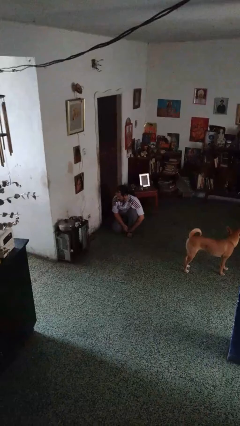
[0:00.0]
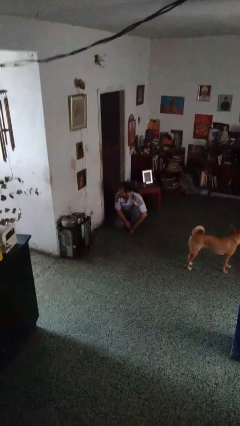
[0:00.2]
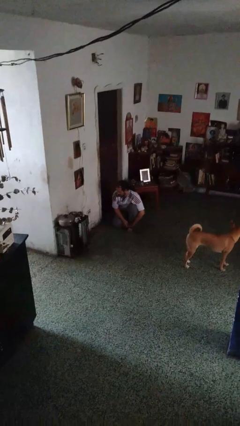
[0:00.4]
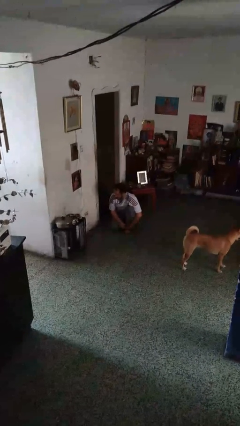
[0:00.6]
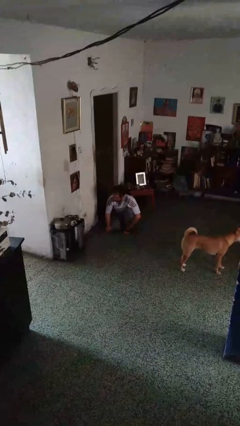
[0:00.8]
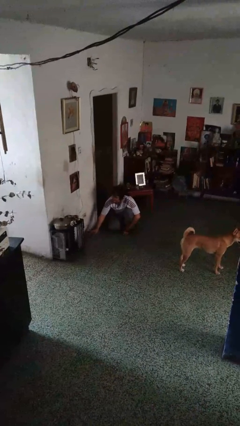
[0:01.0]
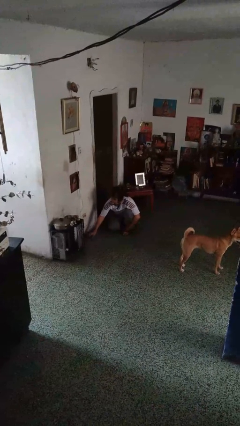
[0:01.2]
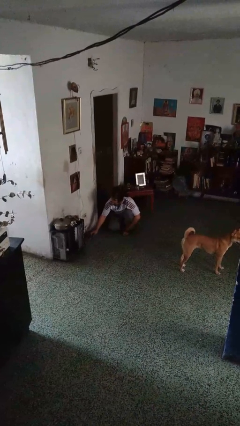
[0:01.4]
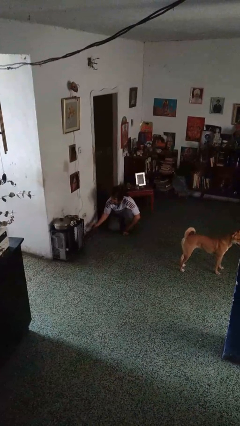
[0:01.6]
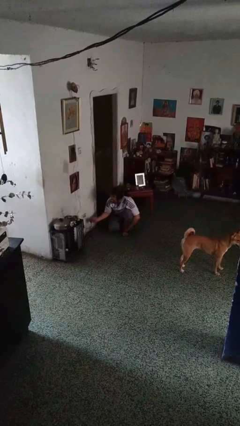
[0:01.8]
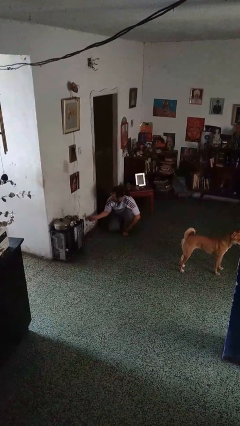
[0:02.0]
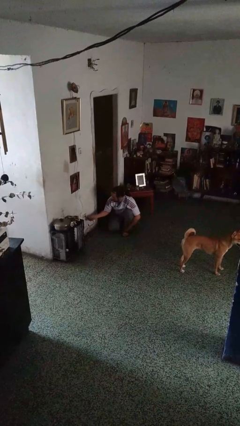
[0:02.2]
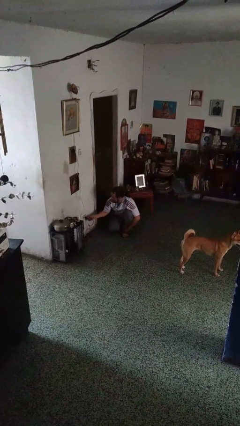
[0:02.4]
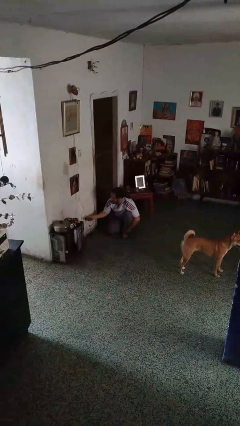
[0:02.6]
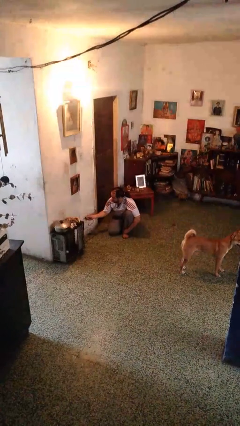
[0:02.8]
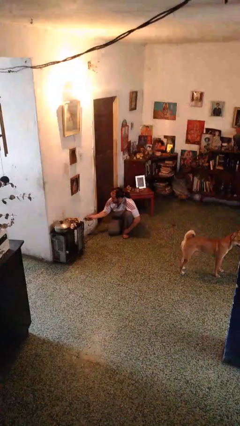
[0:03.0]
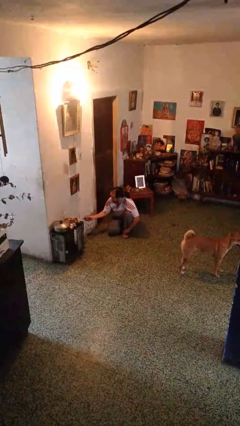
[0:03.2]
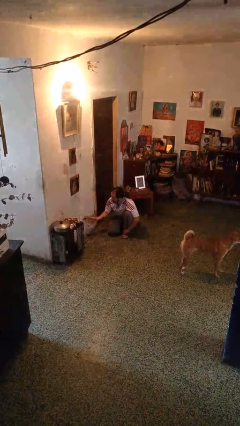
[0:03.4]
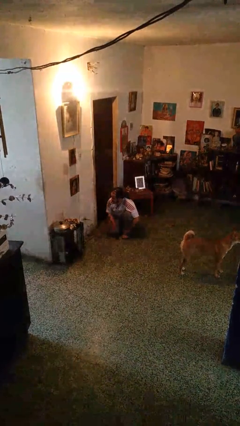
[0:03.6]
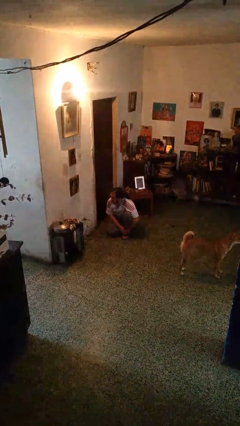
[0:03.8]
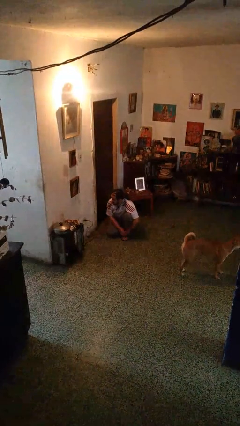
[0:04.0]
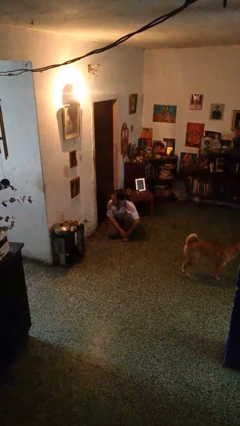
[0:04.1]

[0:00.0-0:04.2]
person plugs into electrical socket

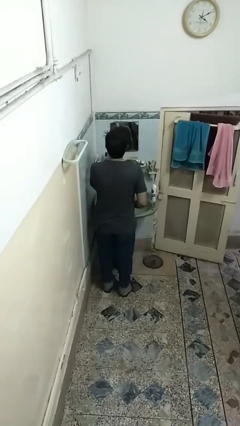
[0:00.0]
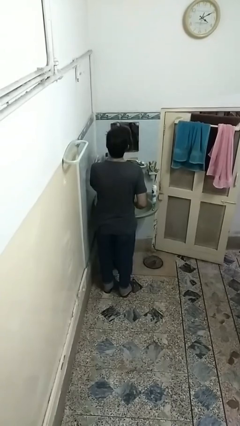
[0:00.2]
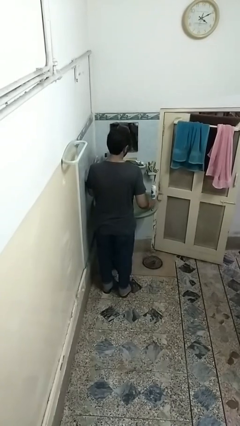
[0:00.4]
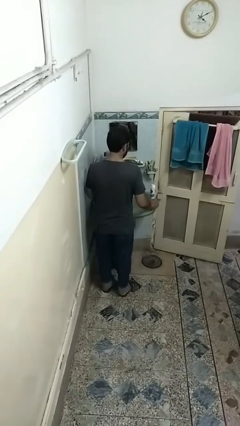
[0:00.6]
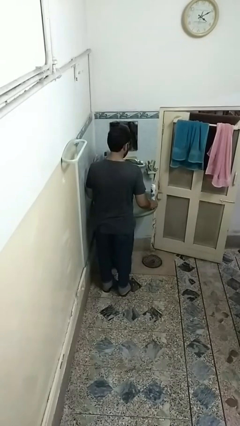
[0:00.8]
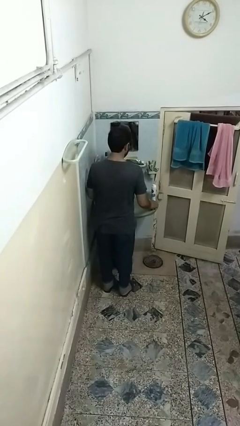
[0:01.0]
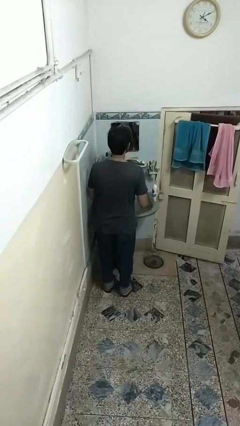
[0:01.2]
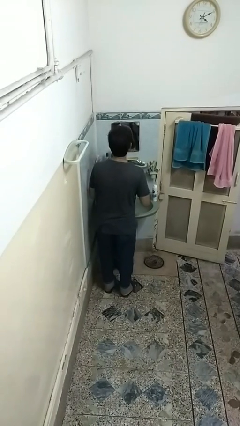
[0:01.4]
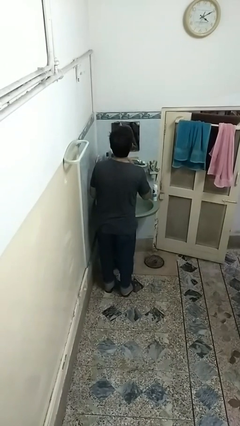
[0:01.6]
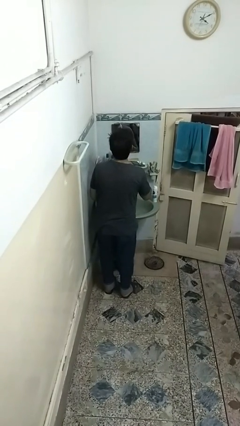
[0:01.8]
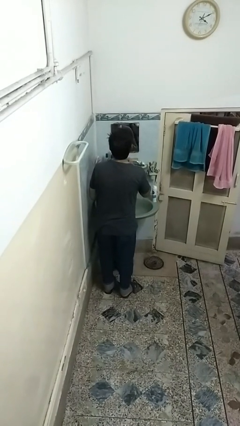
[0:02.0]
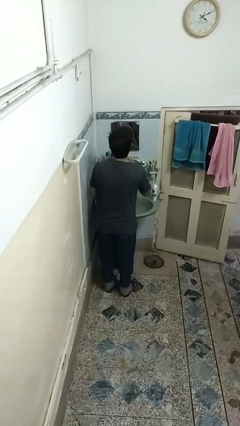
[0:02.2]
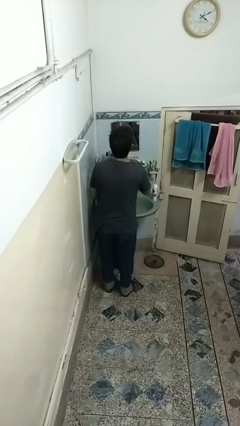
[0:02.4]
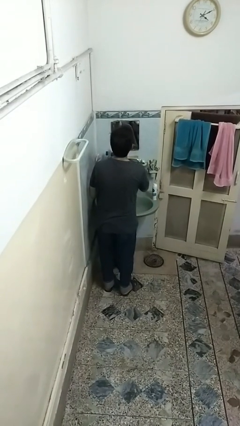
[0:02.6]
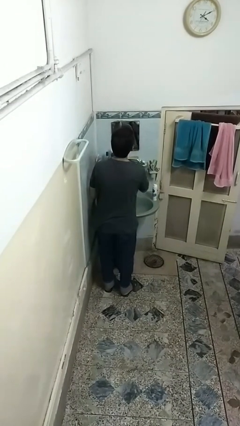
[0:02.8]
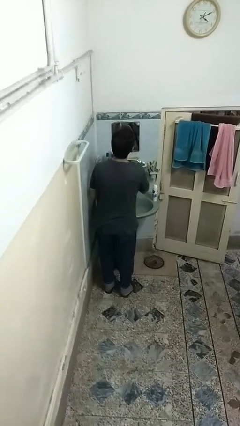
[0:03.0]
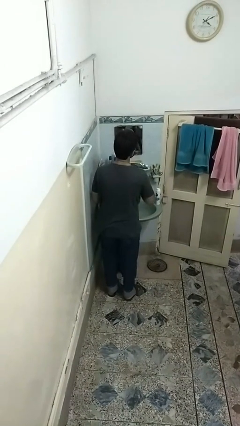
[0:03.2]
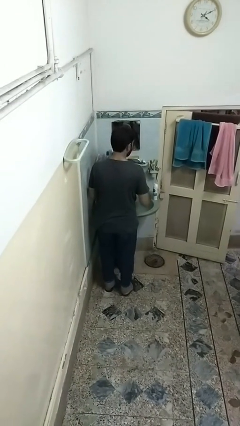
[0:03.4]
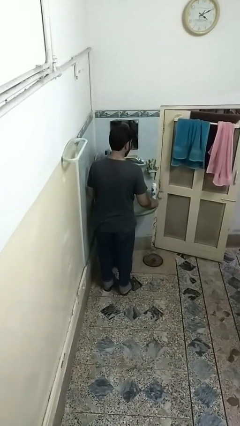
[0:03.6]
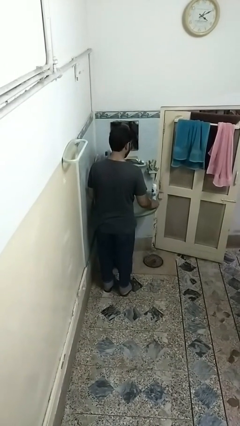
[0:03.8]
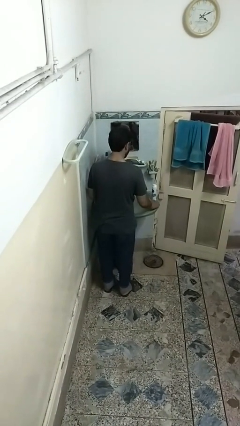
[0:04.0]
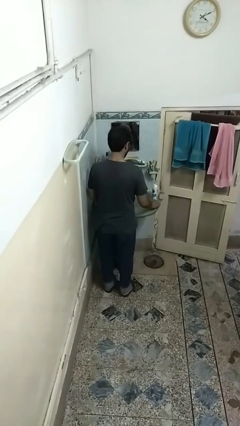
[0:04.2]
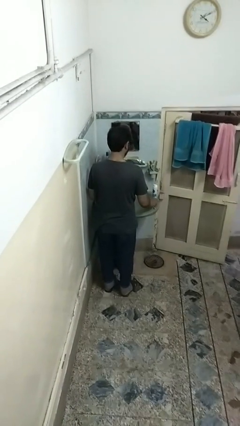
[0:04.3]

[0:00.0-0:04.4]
person shaves face

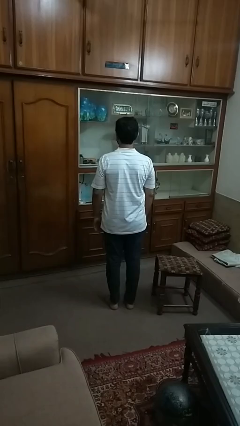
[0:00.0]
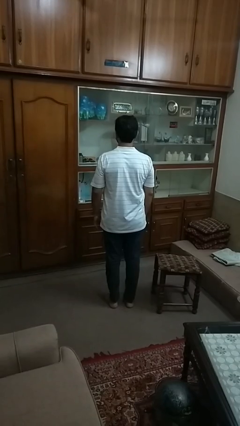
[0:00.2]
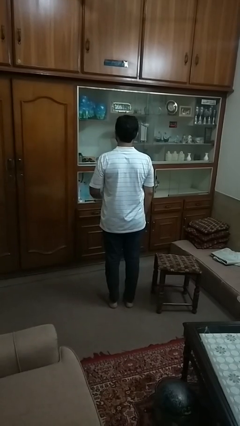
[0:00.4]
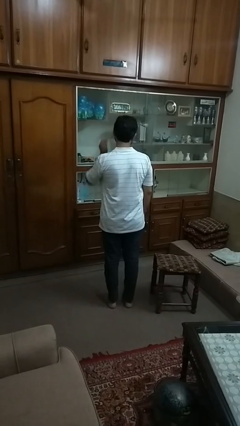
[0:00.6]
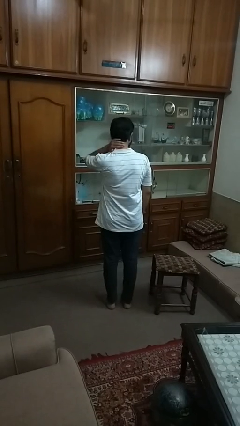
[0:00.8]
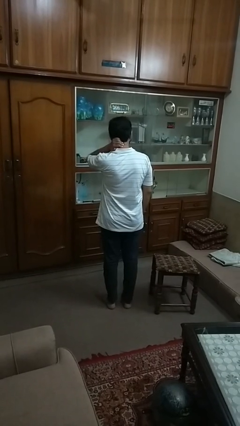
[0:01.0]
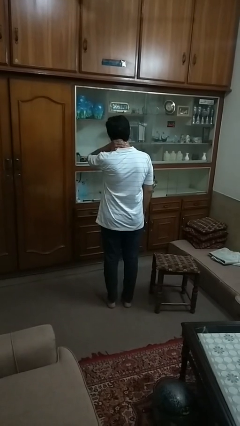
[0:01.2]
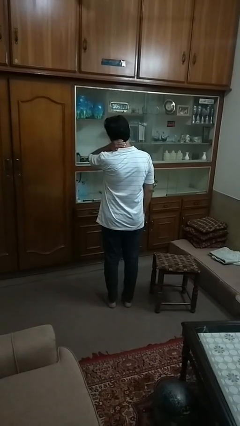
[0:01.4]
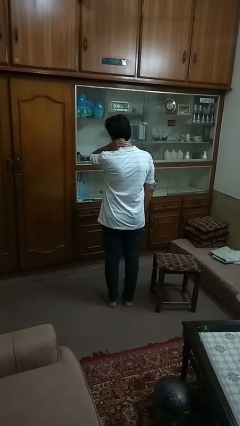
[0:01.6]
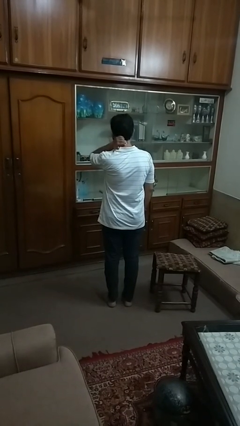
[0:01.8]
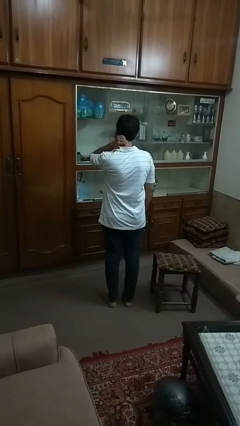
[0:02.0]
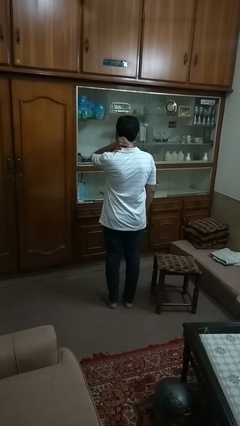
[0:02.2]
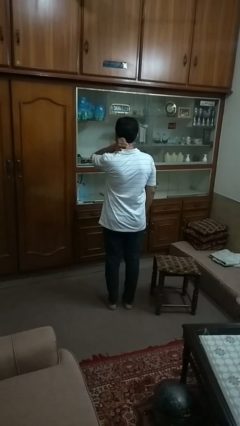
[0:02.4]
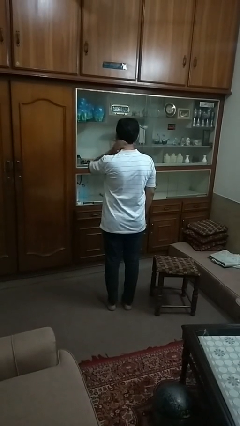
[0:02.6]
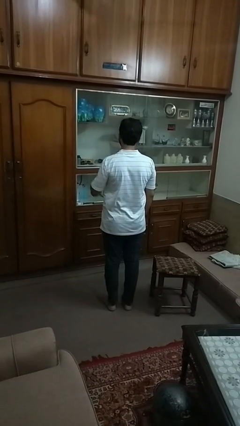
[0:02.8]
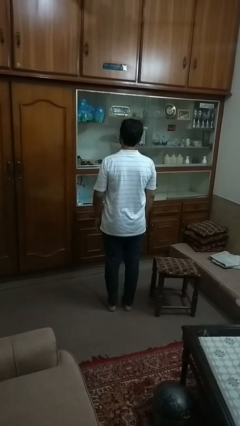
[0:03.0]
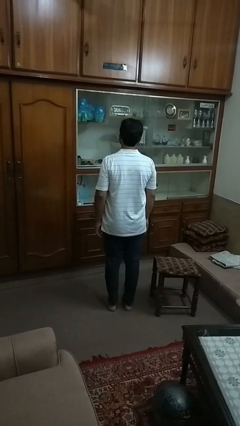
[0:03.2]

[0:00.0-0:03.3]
person rubs neck

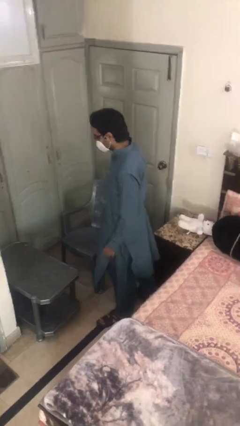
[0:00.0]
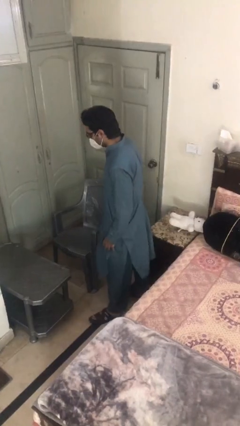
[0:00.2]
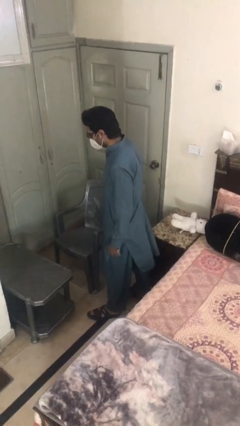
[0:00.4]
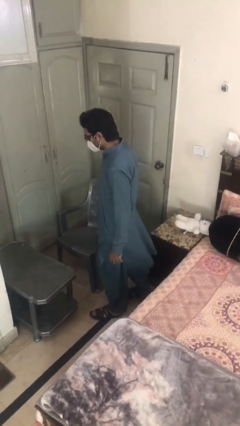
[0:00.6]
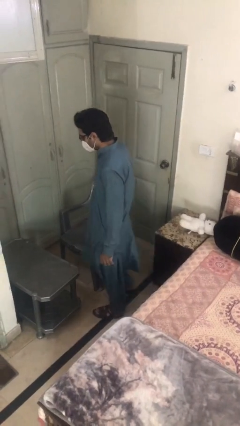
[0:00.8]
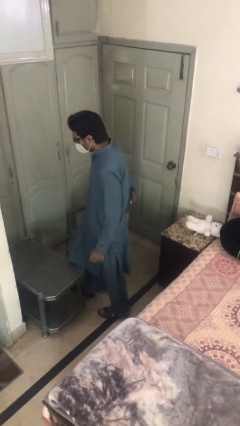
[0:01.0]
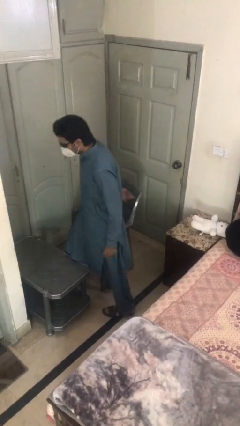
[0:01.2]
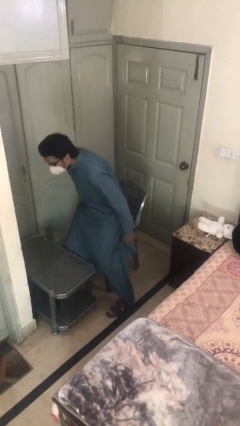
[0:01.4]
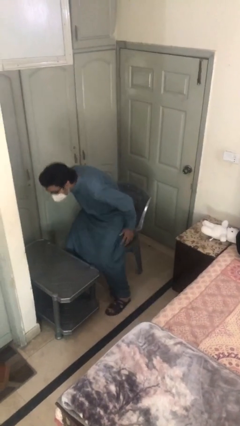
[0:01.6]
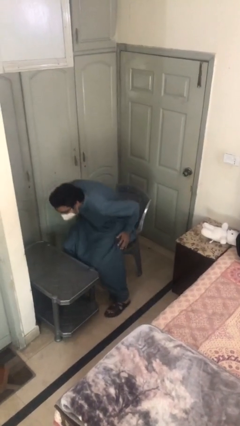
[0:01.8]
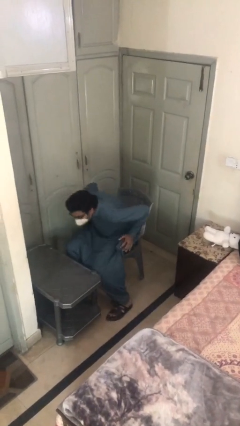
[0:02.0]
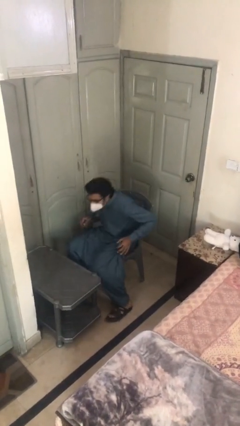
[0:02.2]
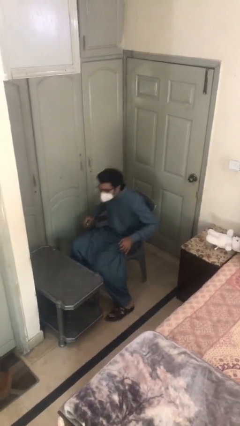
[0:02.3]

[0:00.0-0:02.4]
person sits down

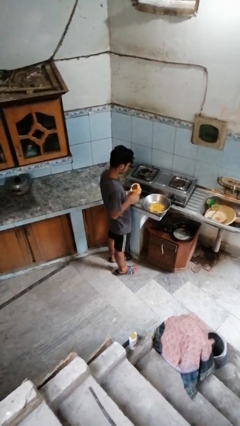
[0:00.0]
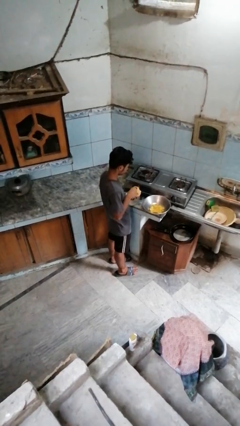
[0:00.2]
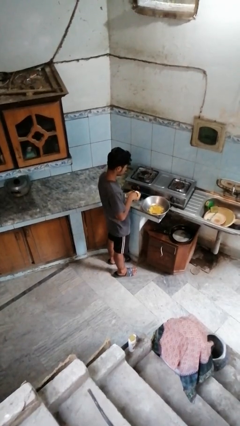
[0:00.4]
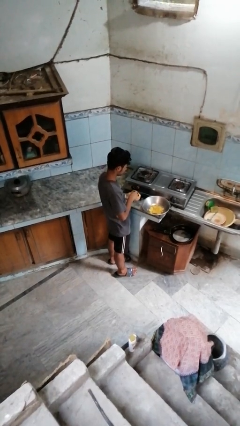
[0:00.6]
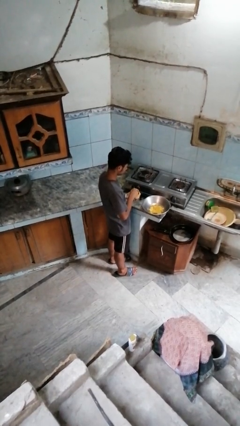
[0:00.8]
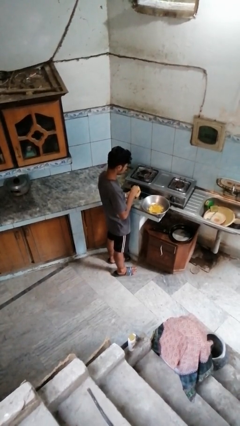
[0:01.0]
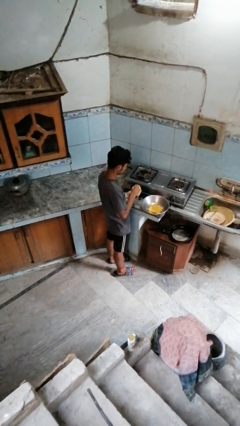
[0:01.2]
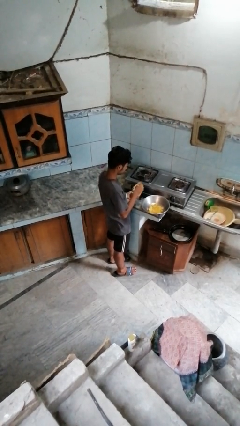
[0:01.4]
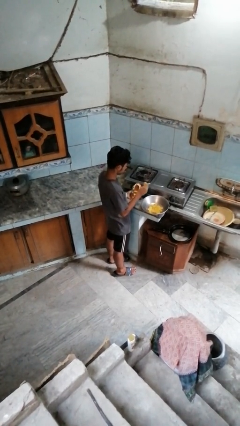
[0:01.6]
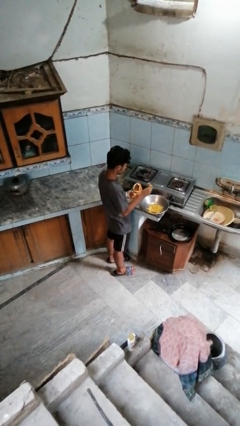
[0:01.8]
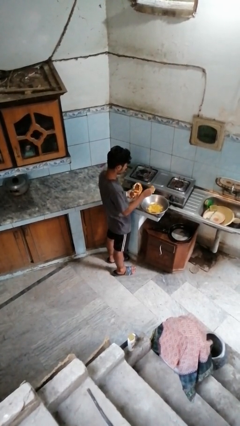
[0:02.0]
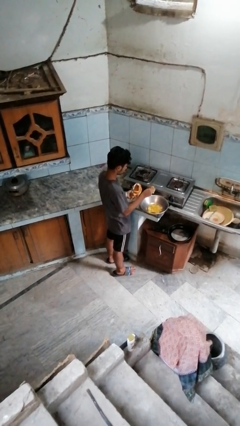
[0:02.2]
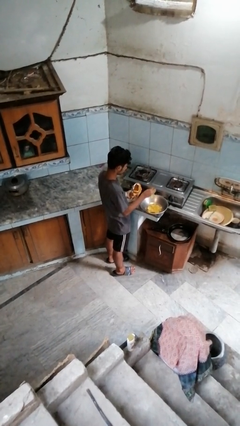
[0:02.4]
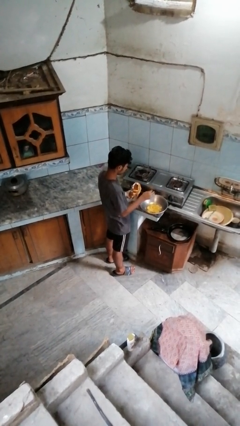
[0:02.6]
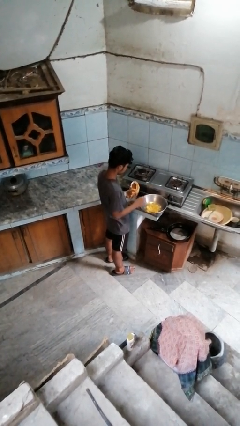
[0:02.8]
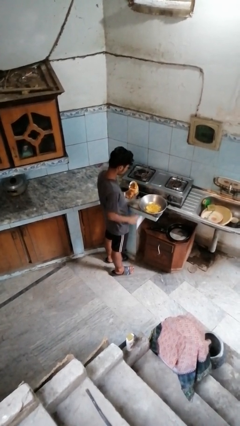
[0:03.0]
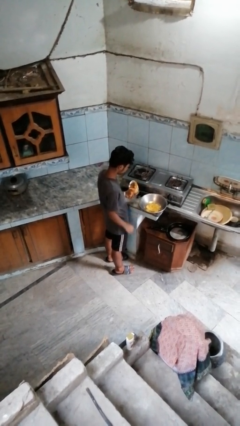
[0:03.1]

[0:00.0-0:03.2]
person pours into bowl
